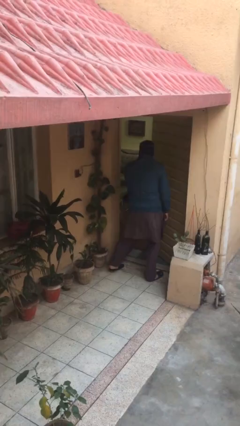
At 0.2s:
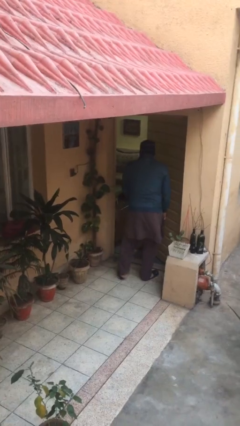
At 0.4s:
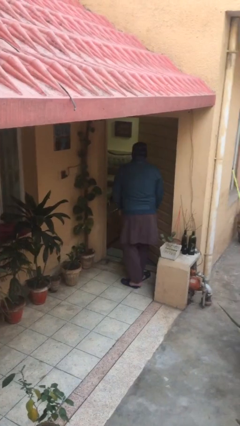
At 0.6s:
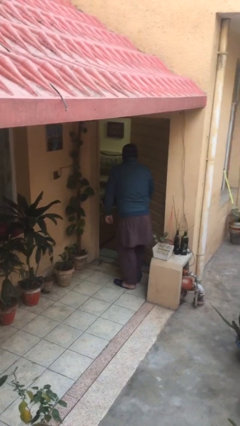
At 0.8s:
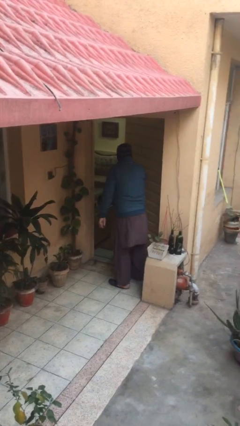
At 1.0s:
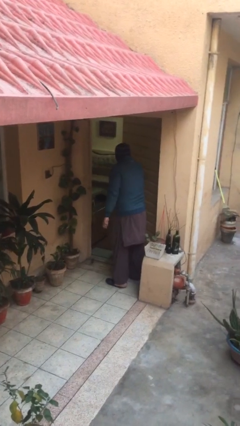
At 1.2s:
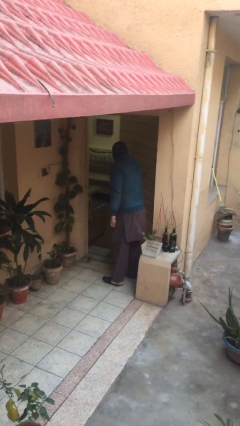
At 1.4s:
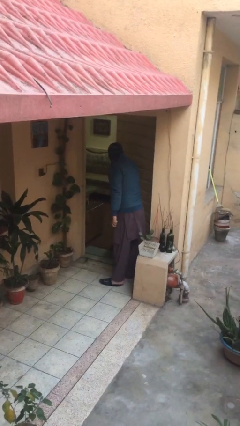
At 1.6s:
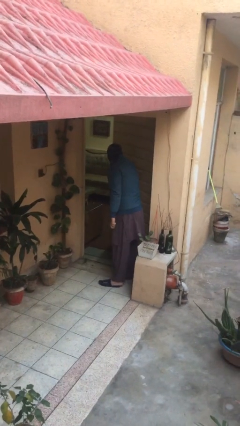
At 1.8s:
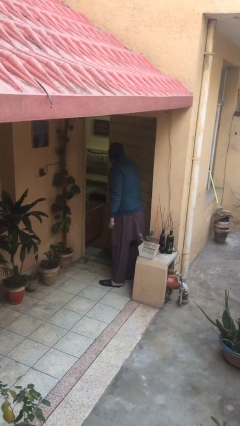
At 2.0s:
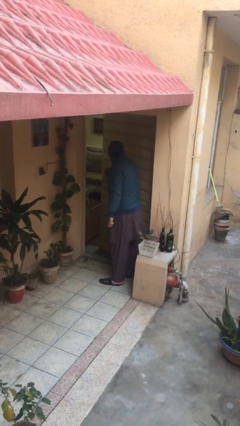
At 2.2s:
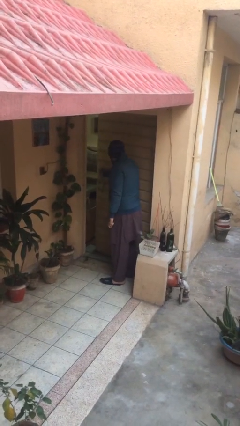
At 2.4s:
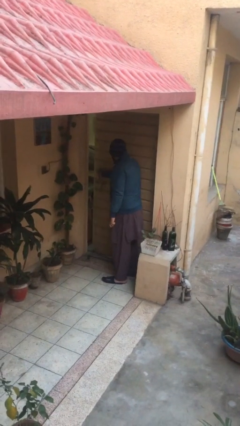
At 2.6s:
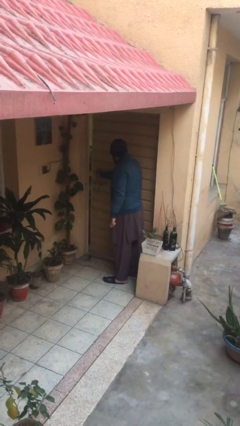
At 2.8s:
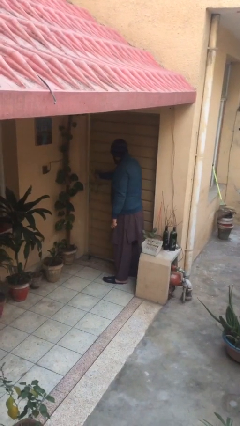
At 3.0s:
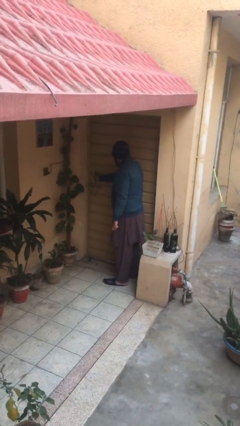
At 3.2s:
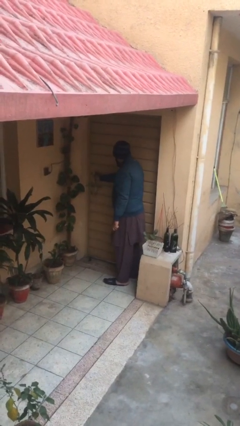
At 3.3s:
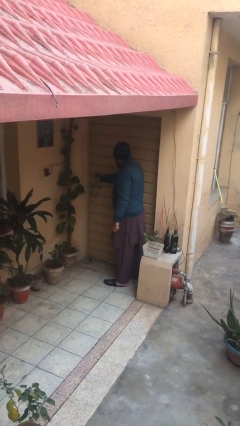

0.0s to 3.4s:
person closes facility door

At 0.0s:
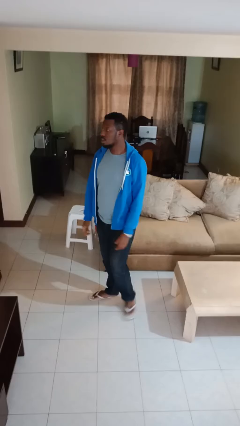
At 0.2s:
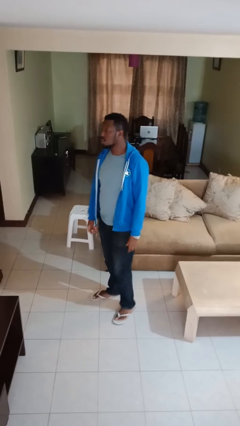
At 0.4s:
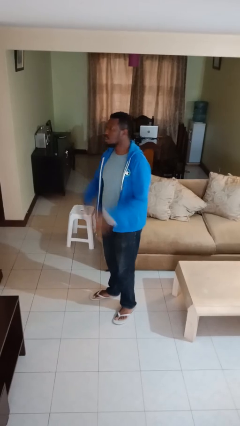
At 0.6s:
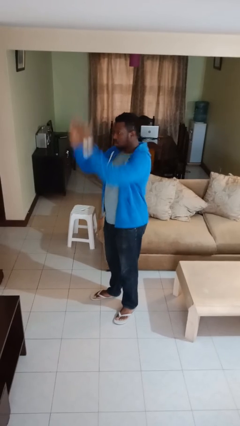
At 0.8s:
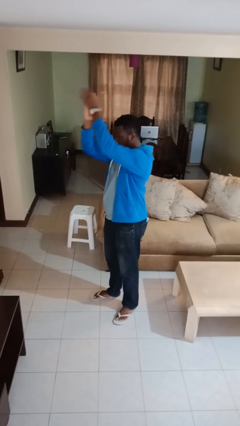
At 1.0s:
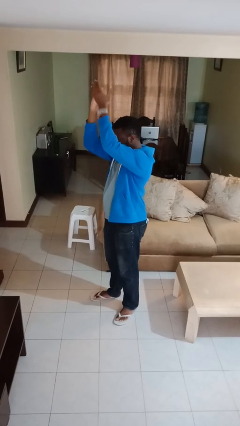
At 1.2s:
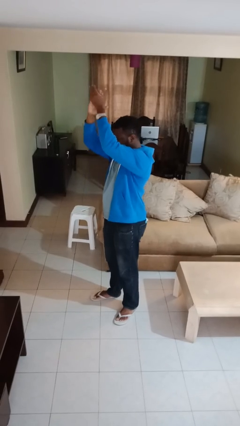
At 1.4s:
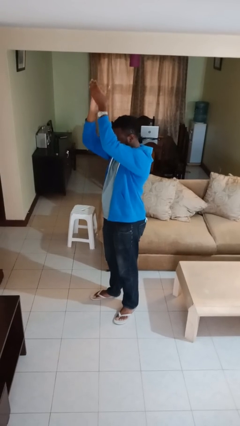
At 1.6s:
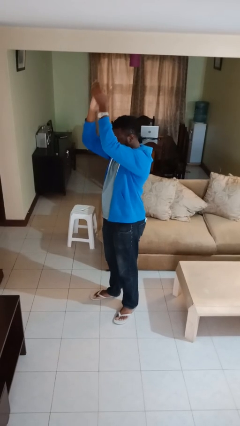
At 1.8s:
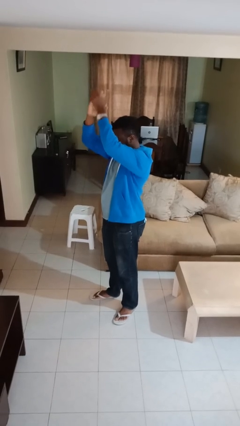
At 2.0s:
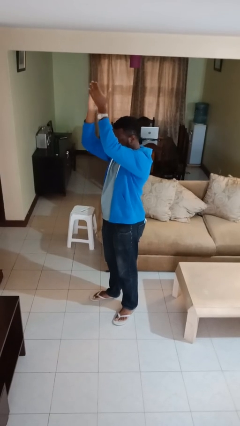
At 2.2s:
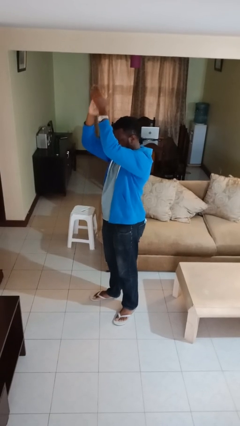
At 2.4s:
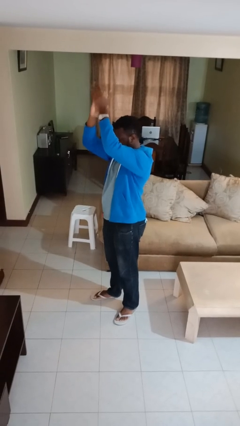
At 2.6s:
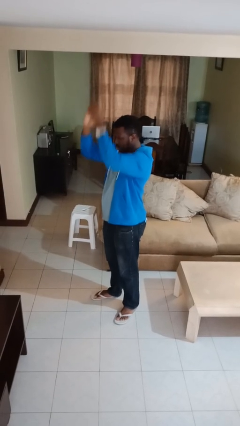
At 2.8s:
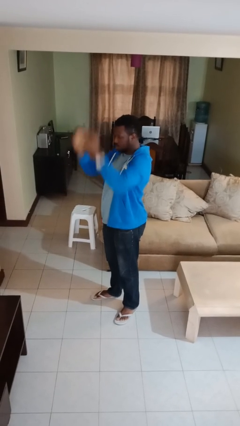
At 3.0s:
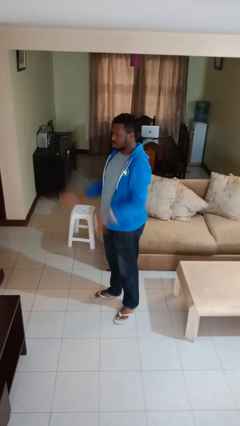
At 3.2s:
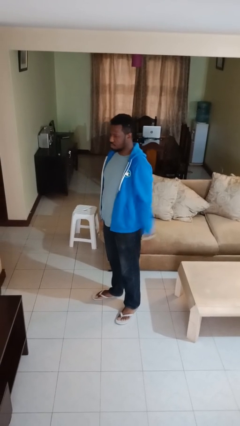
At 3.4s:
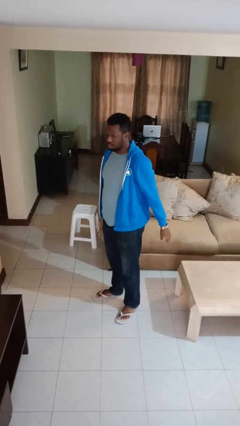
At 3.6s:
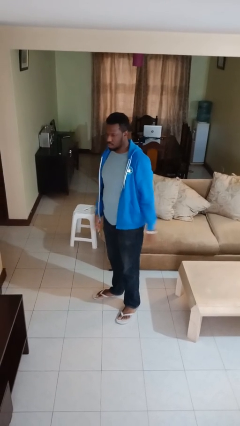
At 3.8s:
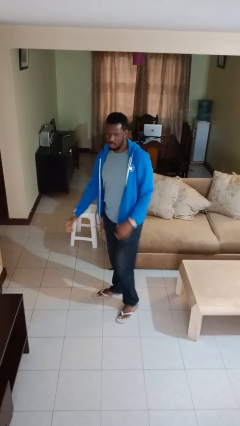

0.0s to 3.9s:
person claps hands

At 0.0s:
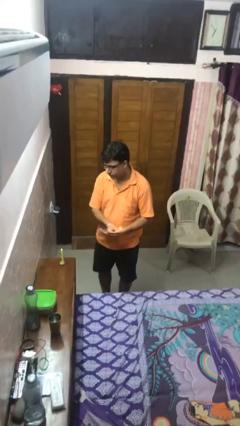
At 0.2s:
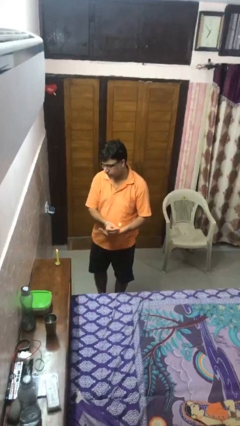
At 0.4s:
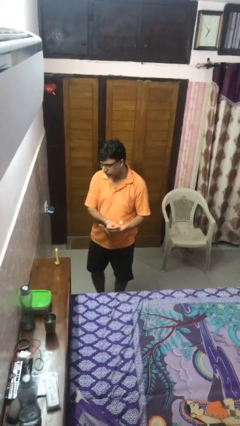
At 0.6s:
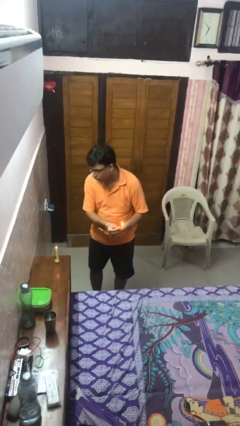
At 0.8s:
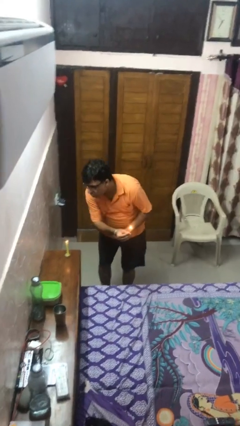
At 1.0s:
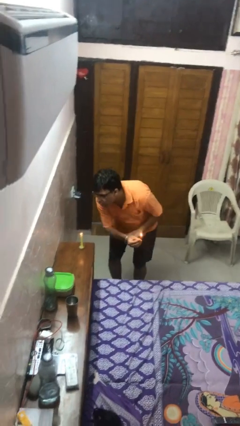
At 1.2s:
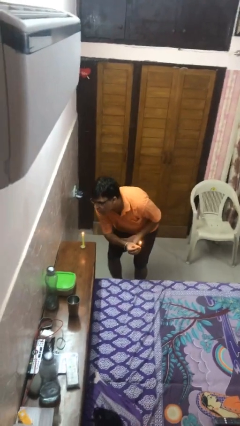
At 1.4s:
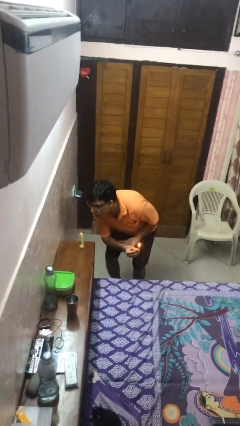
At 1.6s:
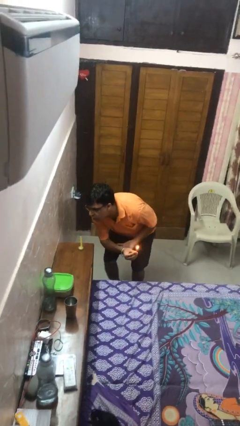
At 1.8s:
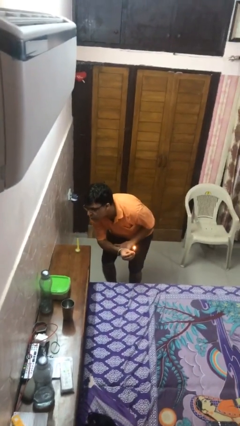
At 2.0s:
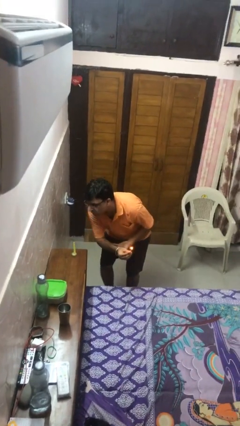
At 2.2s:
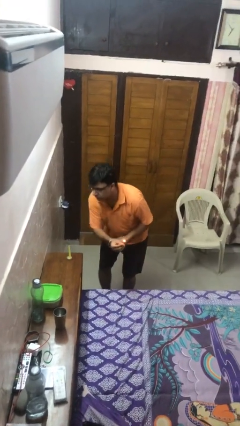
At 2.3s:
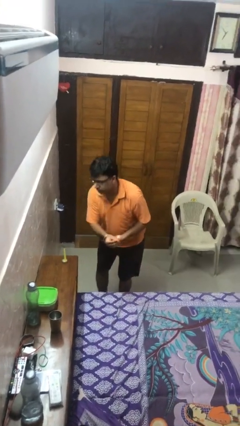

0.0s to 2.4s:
person extinguishes candle

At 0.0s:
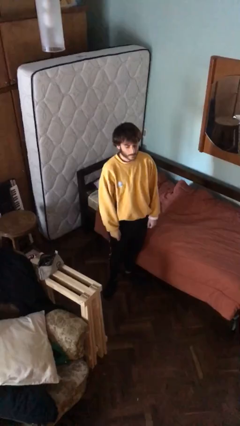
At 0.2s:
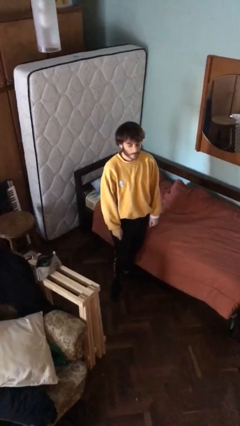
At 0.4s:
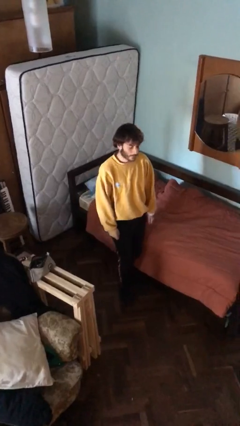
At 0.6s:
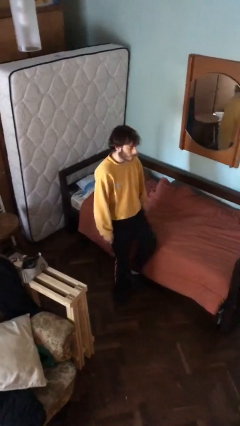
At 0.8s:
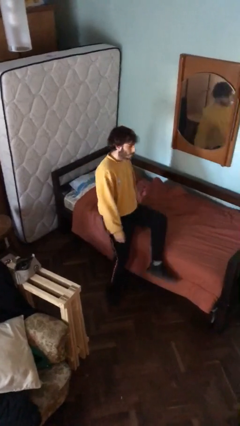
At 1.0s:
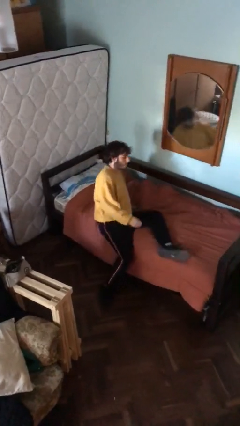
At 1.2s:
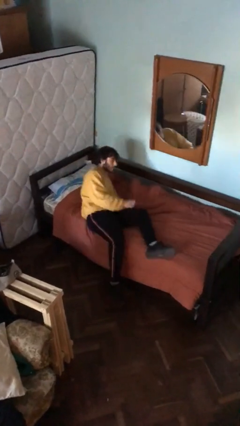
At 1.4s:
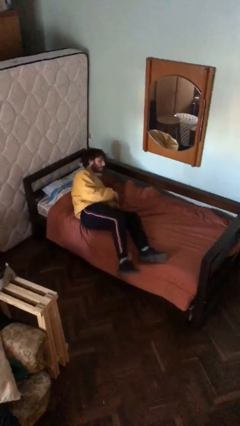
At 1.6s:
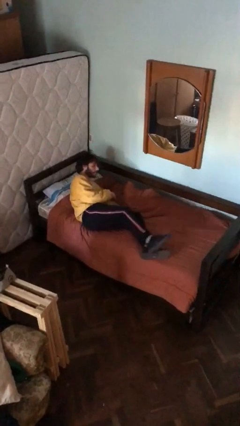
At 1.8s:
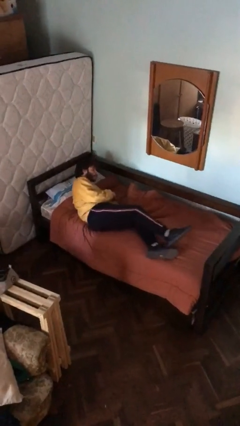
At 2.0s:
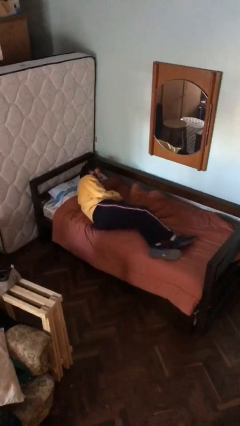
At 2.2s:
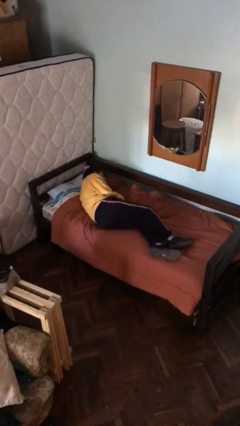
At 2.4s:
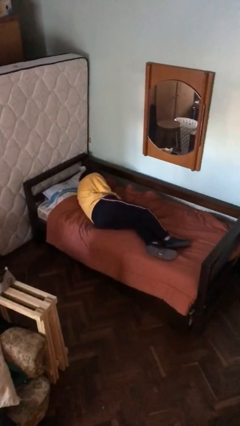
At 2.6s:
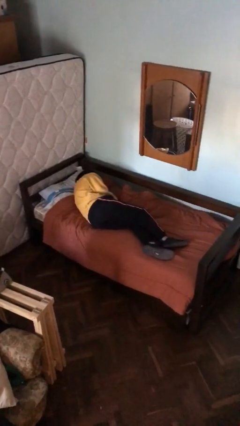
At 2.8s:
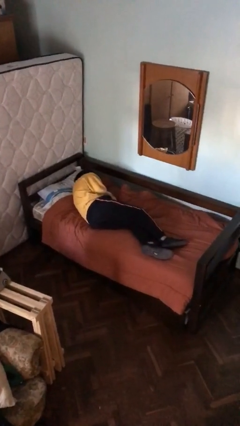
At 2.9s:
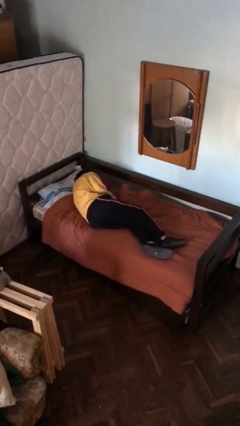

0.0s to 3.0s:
person lies down on bed

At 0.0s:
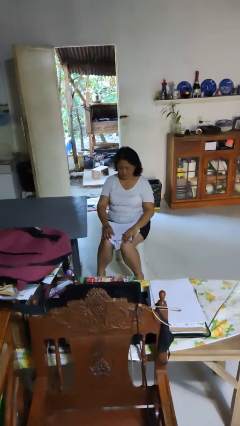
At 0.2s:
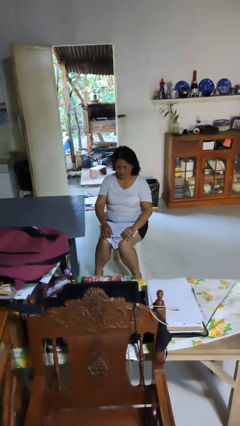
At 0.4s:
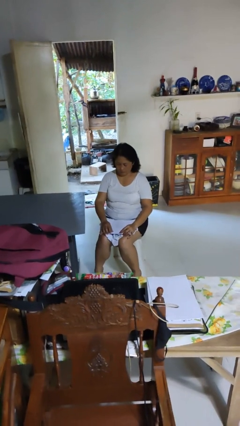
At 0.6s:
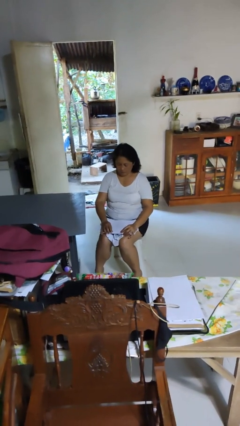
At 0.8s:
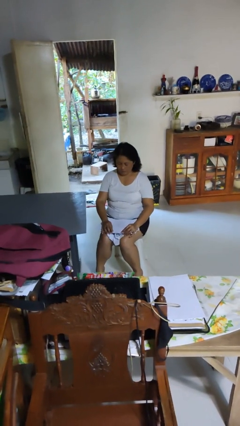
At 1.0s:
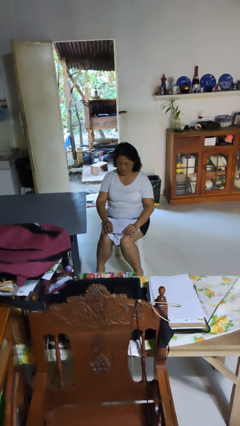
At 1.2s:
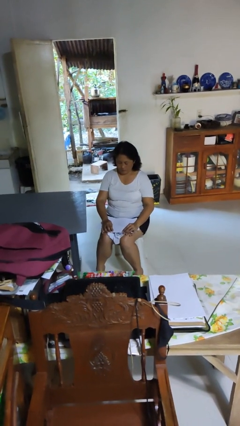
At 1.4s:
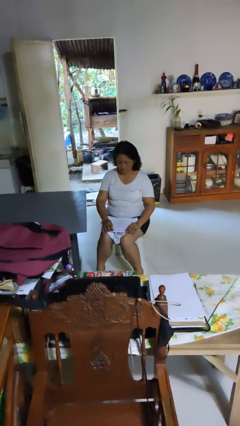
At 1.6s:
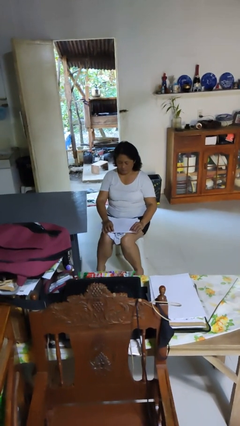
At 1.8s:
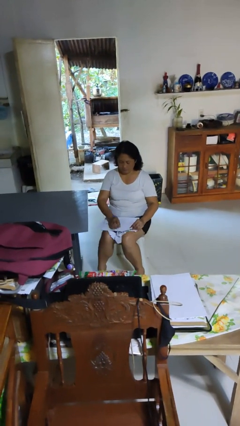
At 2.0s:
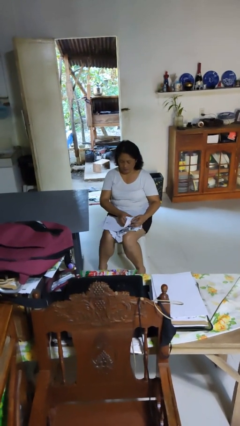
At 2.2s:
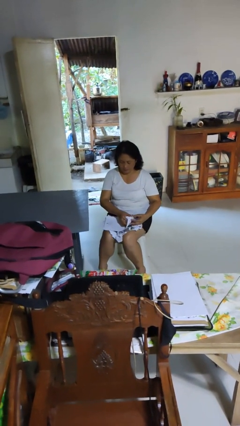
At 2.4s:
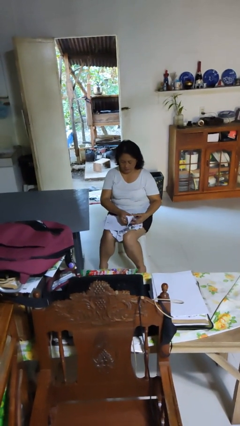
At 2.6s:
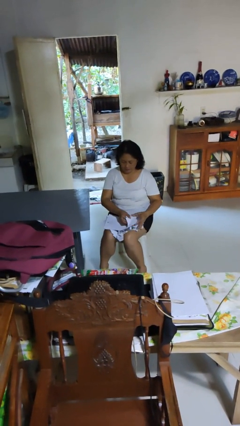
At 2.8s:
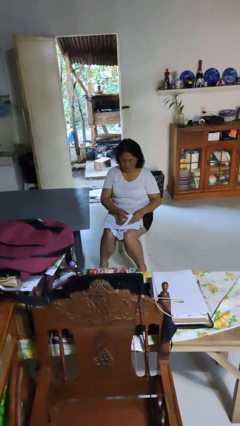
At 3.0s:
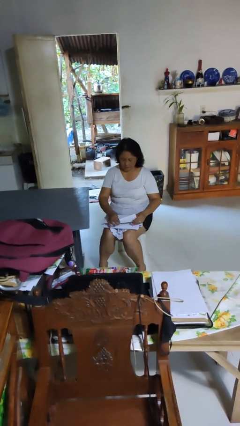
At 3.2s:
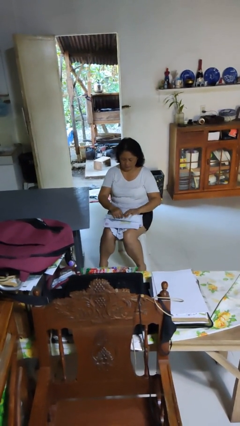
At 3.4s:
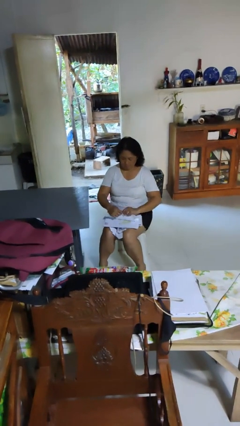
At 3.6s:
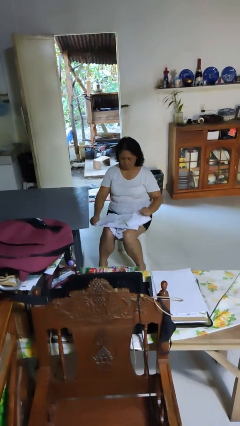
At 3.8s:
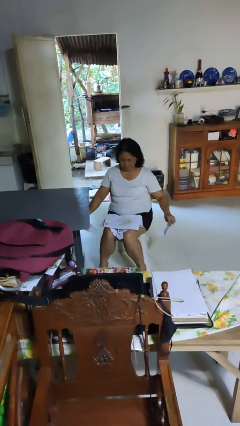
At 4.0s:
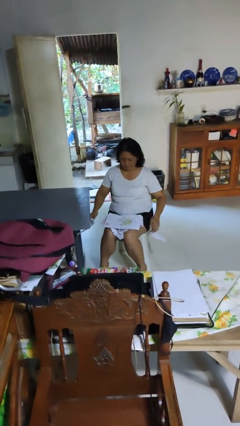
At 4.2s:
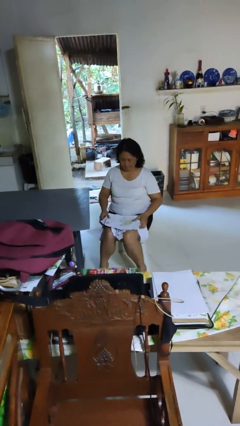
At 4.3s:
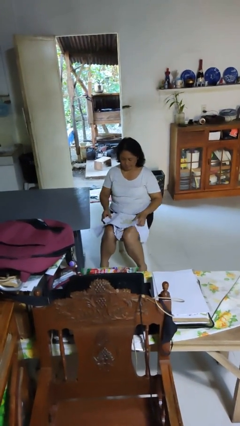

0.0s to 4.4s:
person tears paper

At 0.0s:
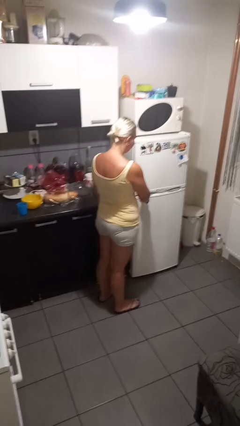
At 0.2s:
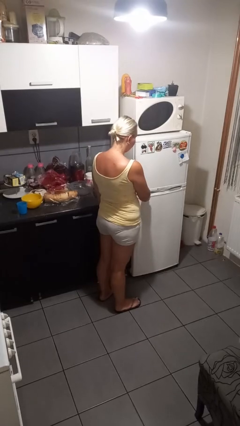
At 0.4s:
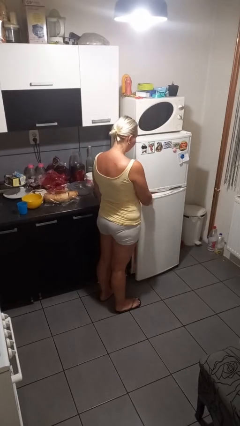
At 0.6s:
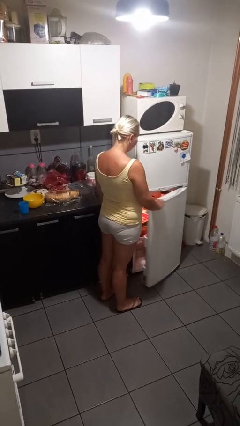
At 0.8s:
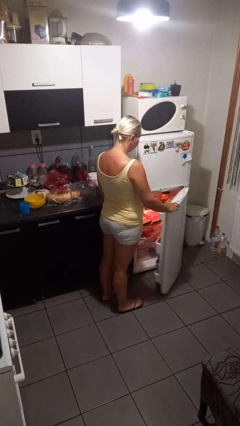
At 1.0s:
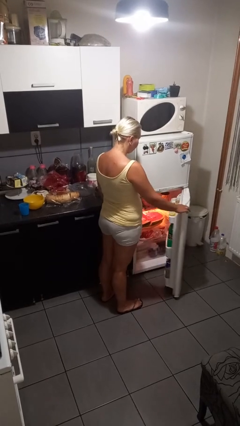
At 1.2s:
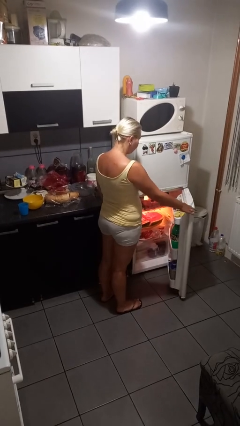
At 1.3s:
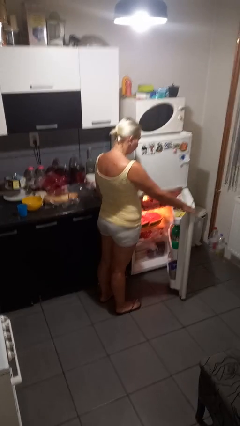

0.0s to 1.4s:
person opens refrigerator
